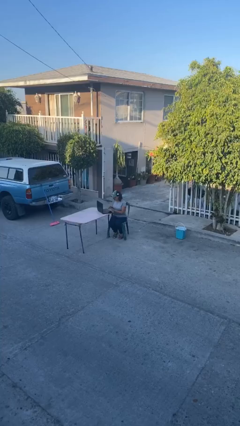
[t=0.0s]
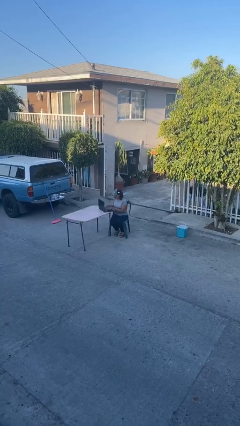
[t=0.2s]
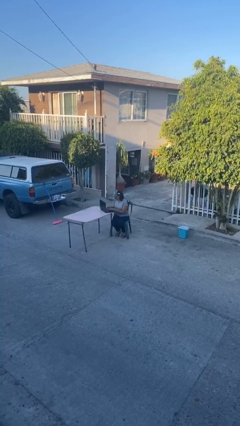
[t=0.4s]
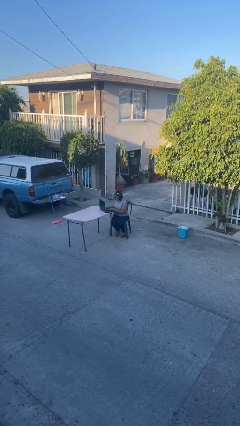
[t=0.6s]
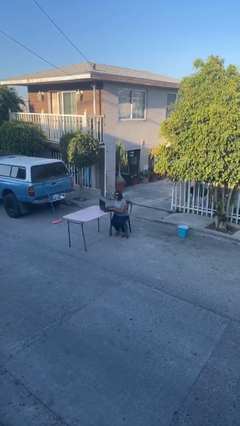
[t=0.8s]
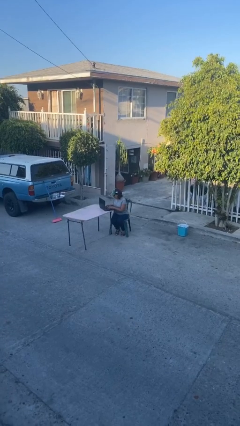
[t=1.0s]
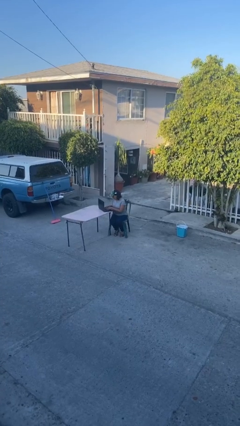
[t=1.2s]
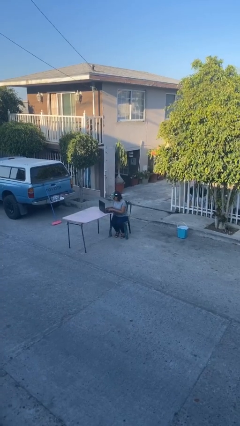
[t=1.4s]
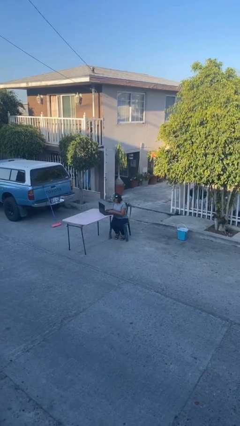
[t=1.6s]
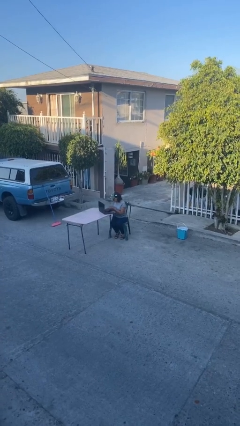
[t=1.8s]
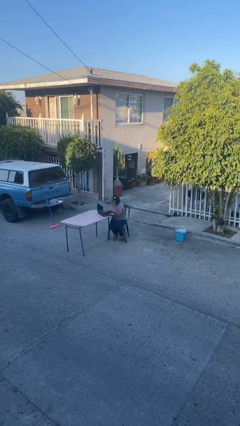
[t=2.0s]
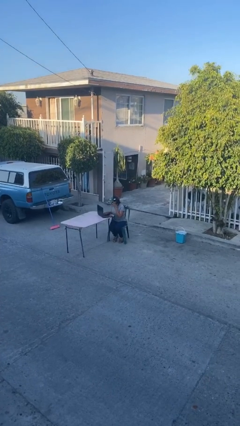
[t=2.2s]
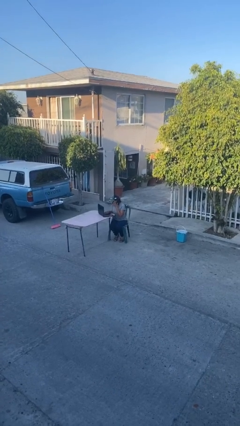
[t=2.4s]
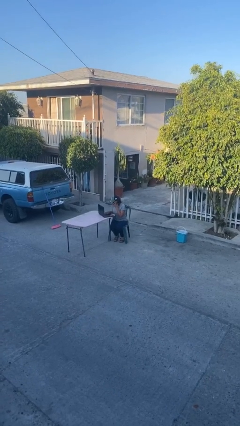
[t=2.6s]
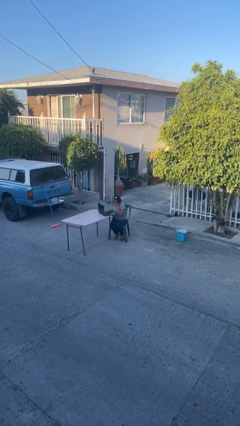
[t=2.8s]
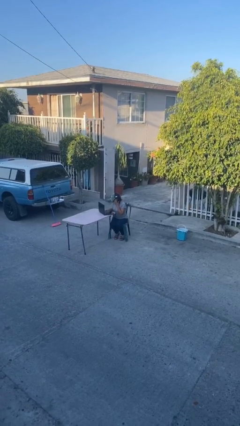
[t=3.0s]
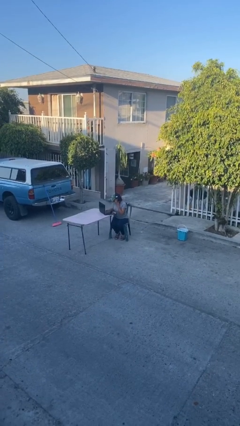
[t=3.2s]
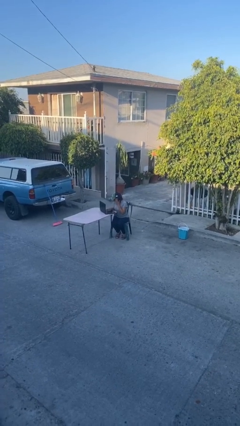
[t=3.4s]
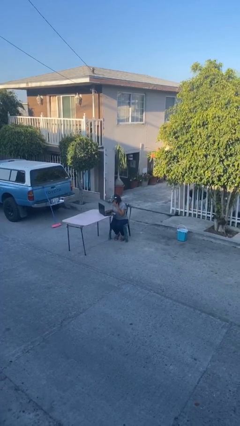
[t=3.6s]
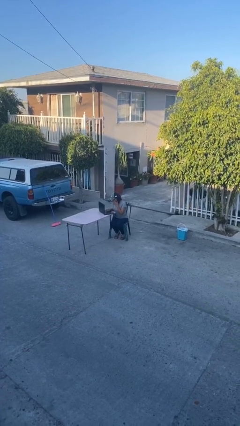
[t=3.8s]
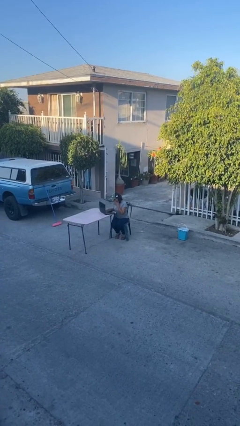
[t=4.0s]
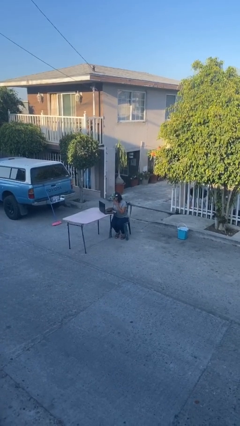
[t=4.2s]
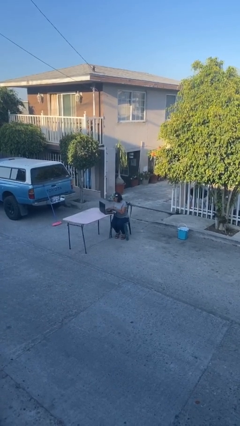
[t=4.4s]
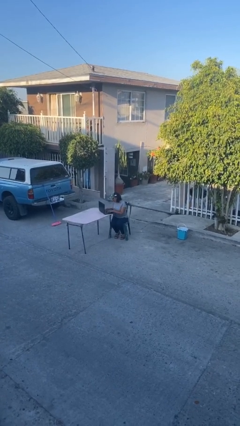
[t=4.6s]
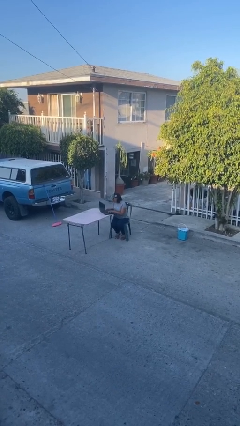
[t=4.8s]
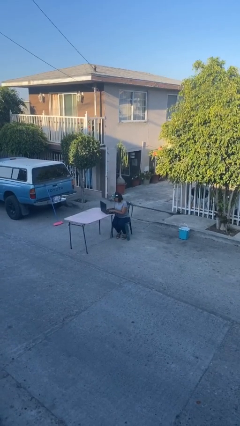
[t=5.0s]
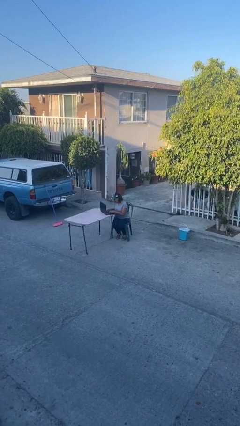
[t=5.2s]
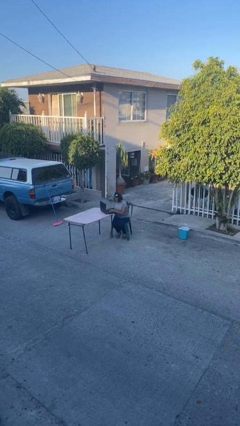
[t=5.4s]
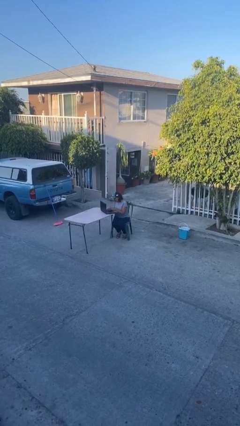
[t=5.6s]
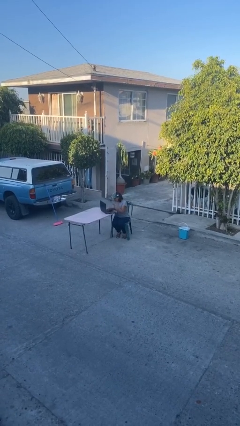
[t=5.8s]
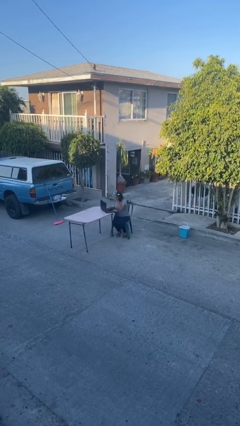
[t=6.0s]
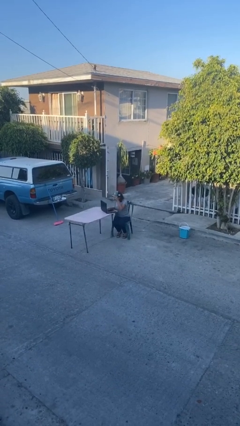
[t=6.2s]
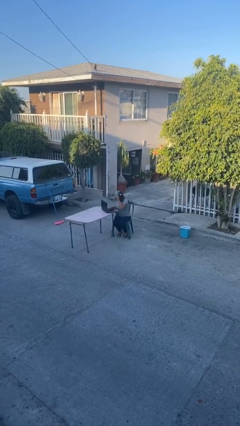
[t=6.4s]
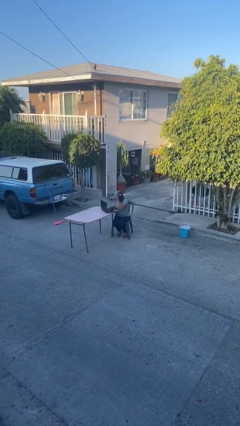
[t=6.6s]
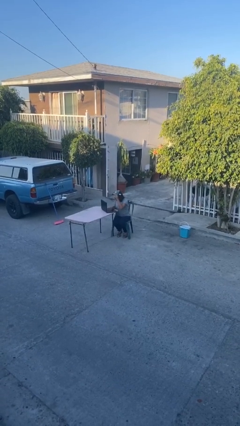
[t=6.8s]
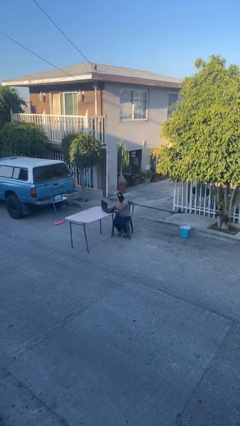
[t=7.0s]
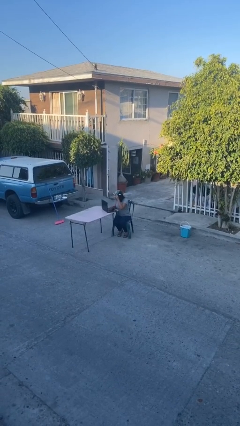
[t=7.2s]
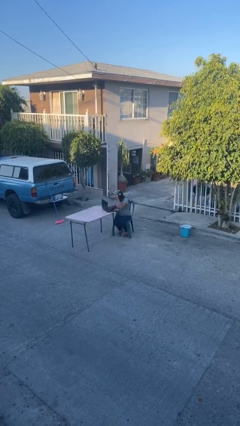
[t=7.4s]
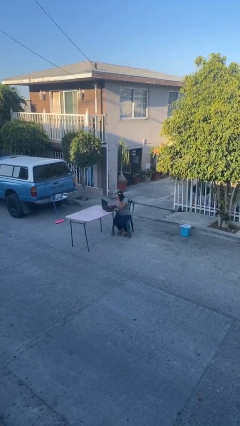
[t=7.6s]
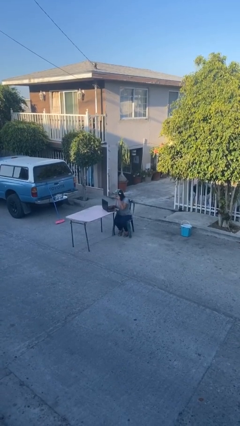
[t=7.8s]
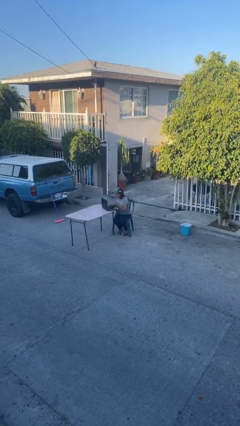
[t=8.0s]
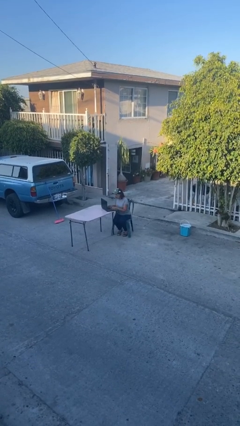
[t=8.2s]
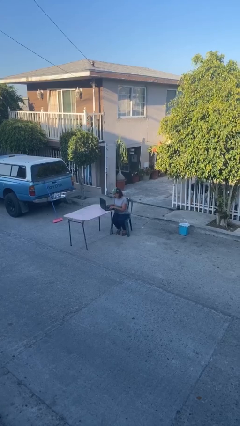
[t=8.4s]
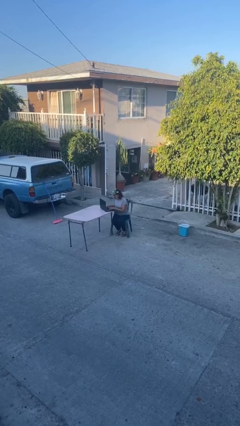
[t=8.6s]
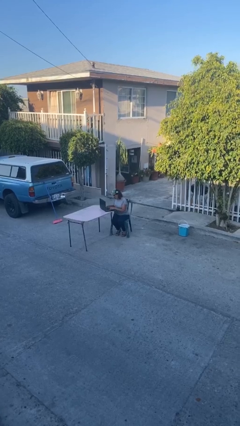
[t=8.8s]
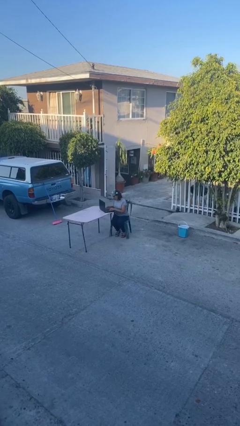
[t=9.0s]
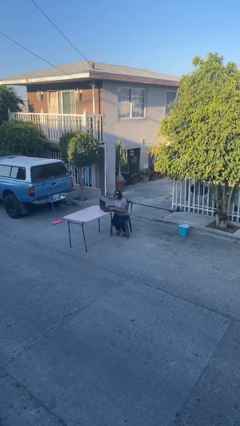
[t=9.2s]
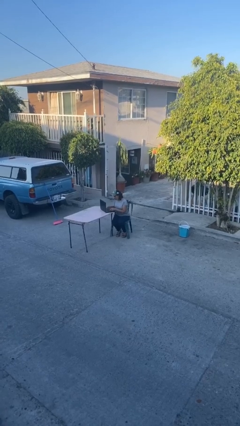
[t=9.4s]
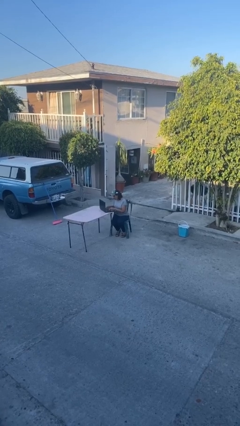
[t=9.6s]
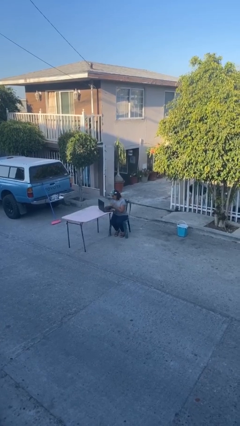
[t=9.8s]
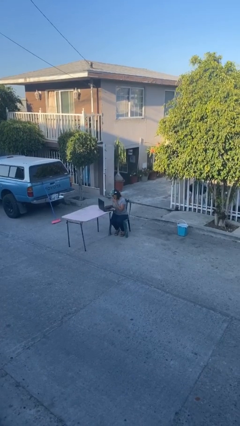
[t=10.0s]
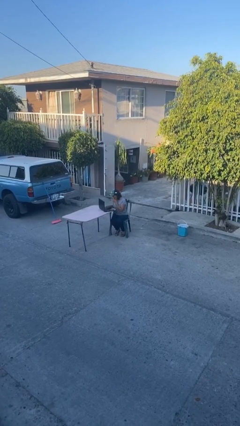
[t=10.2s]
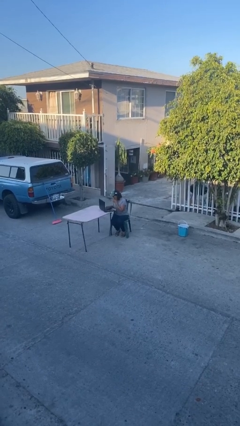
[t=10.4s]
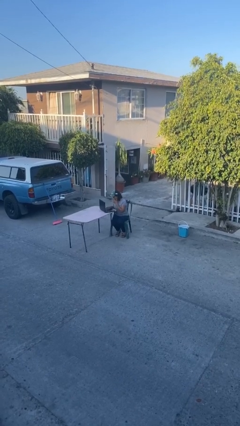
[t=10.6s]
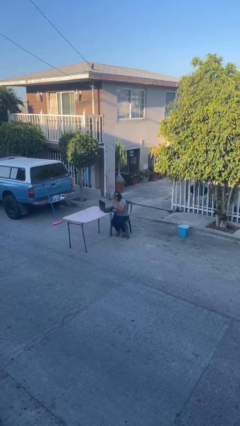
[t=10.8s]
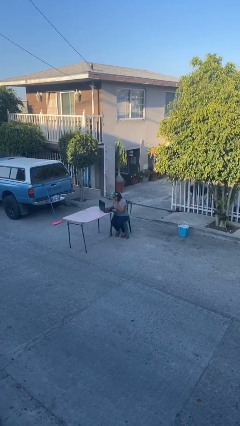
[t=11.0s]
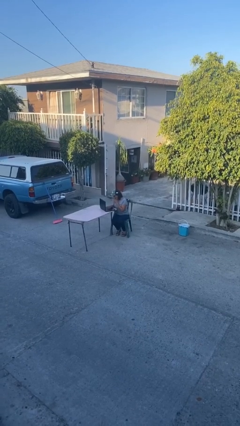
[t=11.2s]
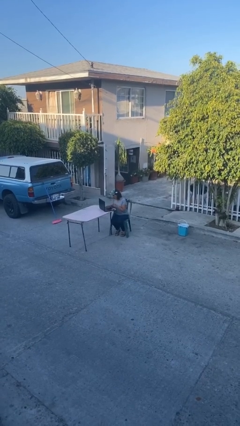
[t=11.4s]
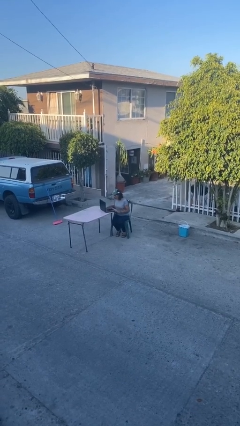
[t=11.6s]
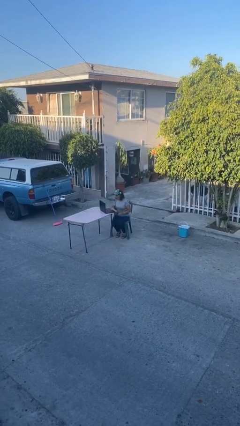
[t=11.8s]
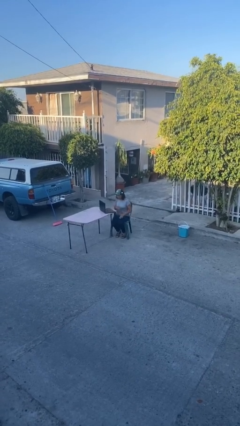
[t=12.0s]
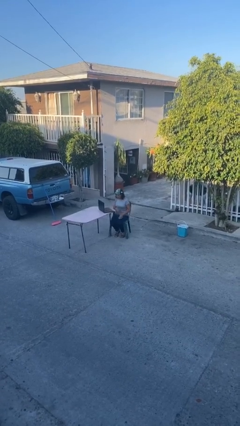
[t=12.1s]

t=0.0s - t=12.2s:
person interacts with laptop

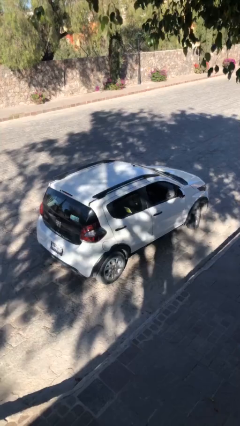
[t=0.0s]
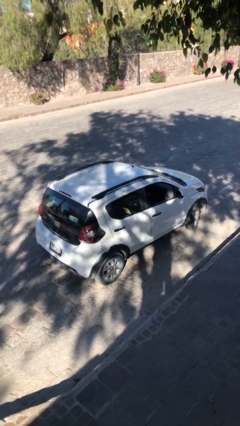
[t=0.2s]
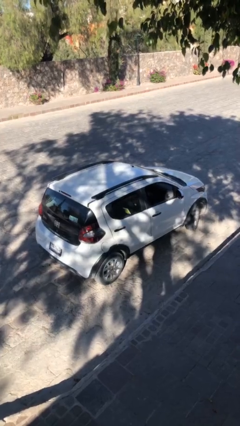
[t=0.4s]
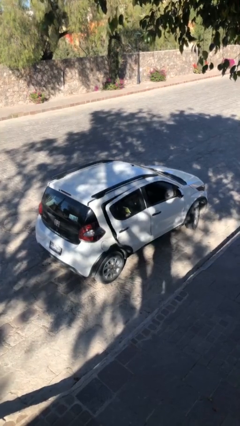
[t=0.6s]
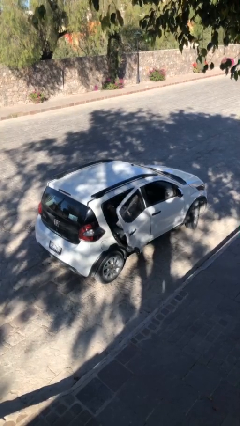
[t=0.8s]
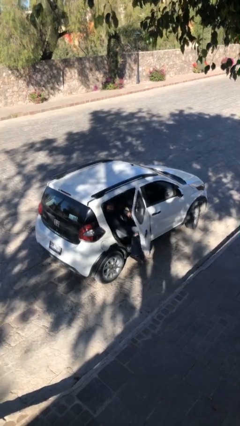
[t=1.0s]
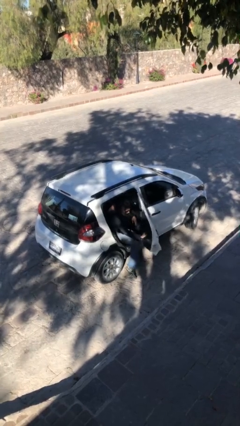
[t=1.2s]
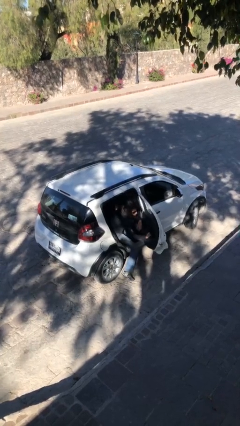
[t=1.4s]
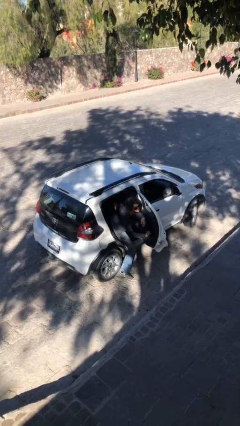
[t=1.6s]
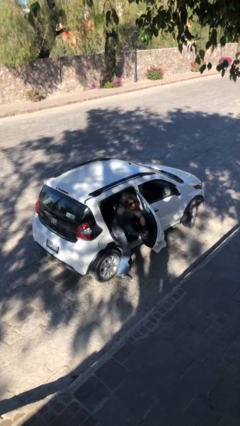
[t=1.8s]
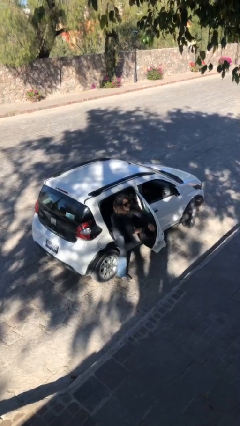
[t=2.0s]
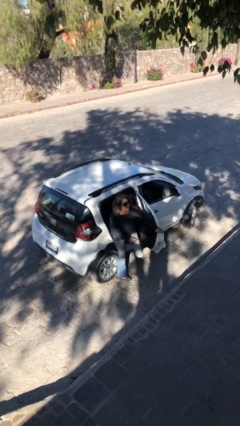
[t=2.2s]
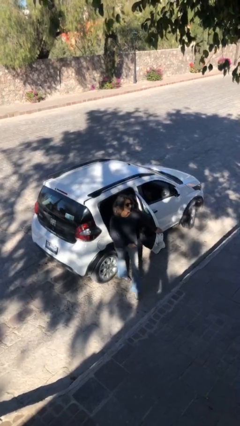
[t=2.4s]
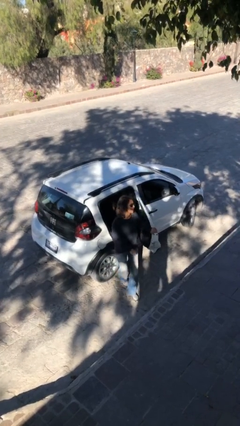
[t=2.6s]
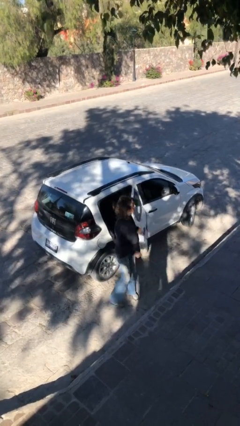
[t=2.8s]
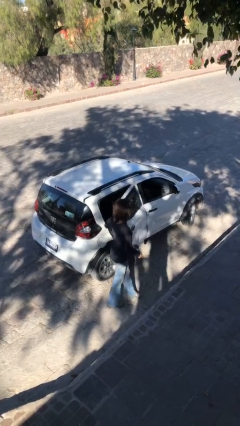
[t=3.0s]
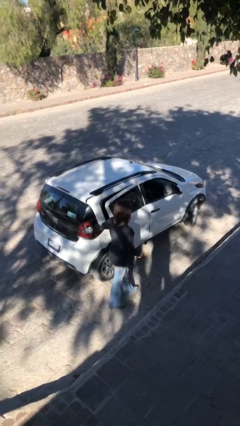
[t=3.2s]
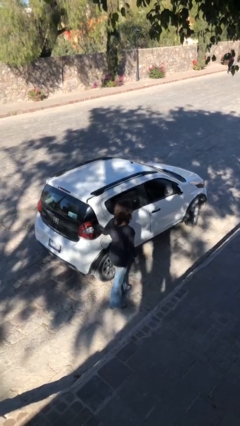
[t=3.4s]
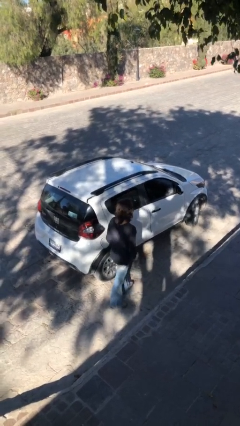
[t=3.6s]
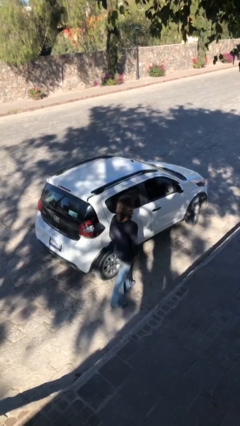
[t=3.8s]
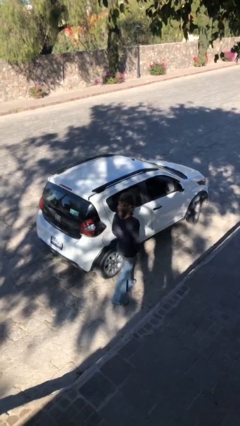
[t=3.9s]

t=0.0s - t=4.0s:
car drops off person

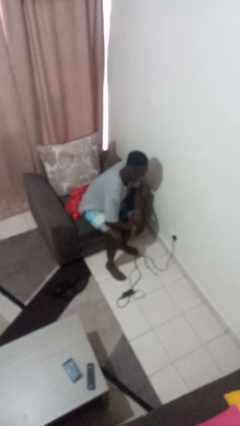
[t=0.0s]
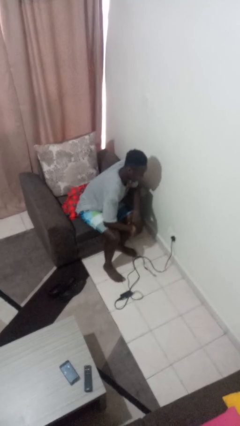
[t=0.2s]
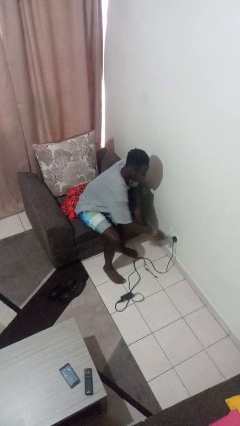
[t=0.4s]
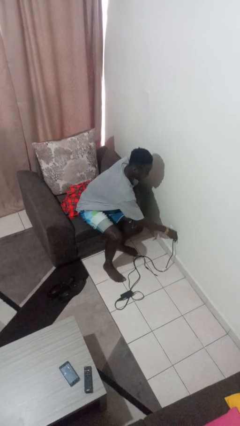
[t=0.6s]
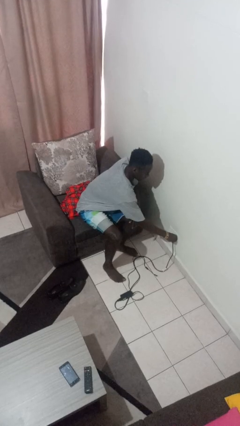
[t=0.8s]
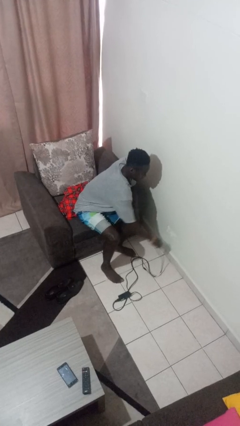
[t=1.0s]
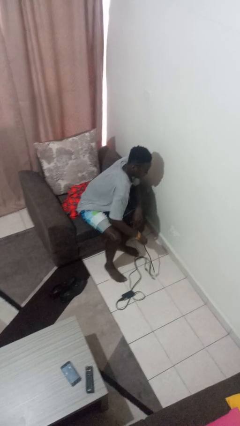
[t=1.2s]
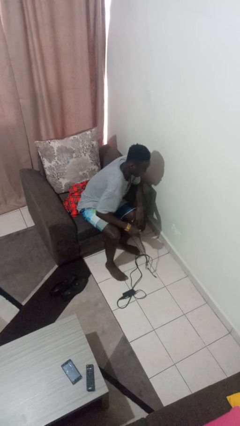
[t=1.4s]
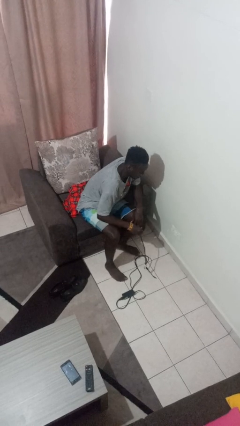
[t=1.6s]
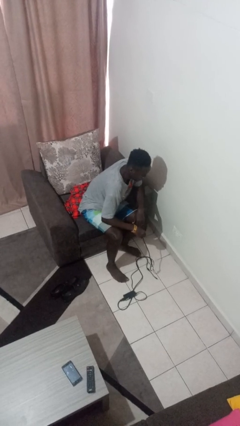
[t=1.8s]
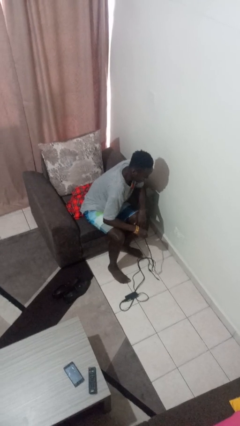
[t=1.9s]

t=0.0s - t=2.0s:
person unplugs from electrical socket
